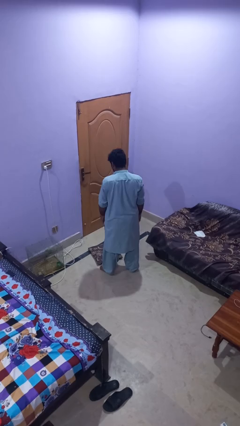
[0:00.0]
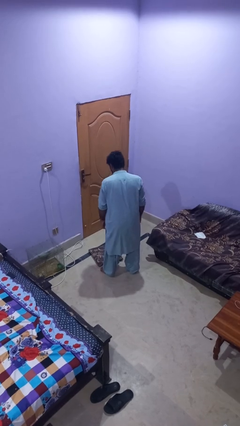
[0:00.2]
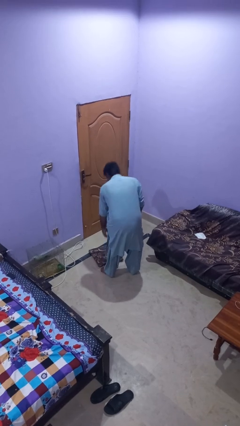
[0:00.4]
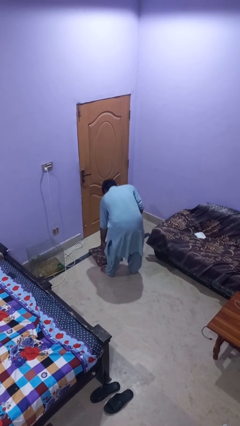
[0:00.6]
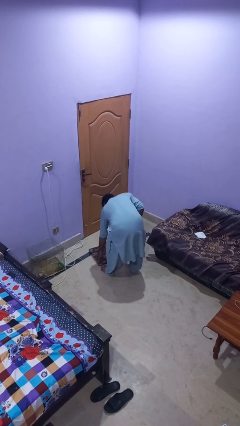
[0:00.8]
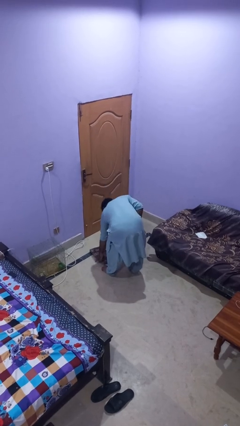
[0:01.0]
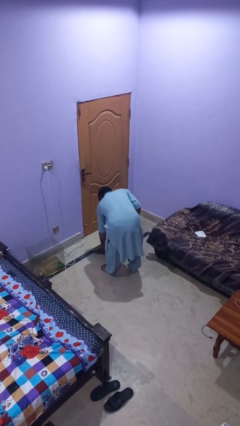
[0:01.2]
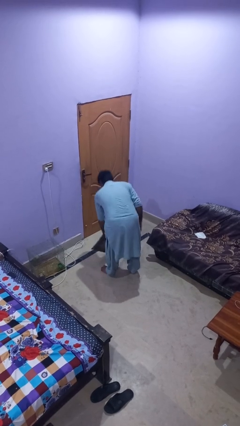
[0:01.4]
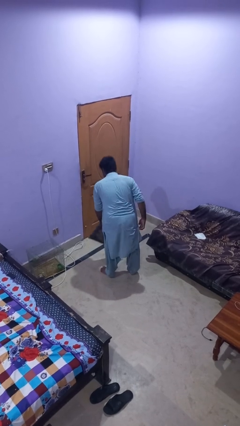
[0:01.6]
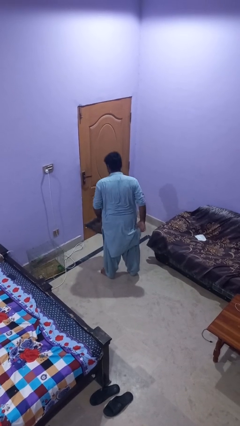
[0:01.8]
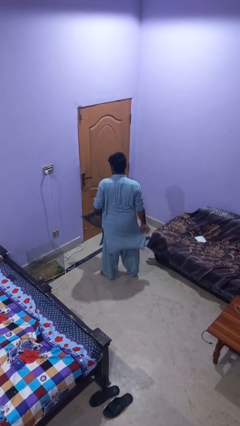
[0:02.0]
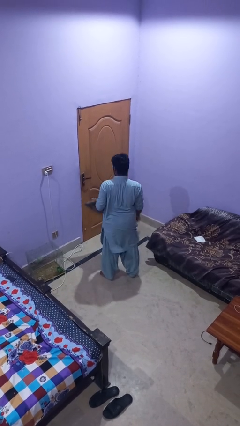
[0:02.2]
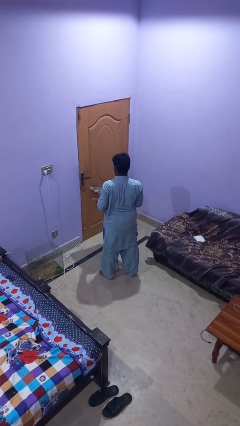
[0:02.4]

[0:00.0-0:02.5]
person picks up object from floor

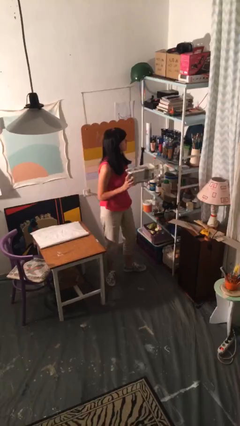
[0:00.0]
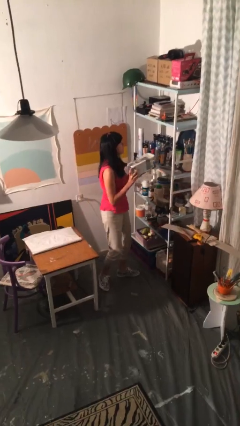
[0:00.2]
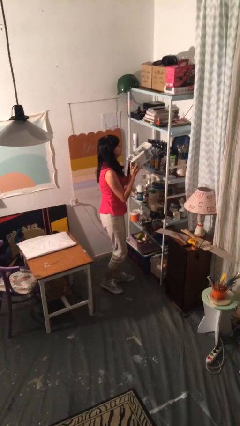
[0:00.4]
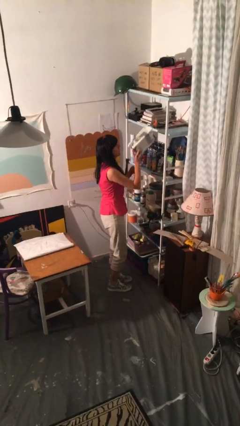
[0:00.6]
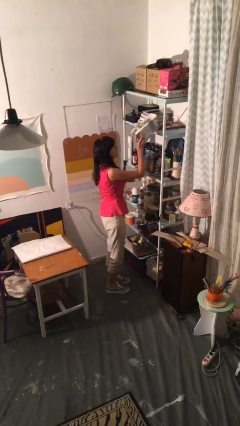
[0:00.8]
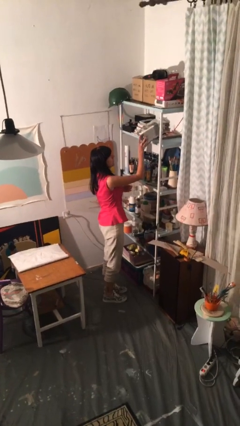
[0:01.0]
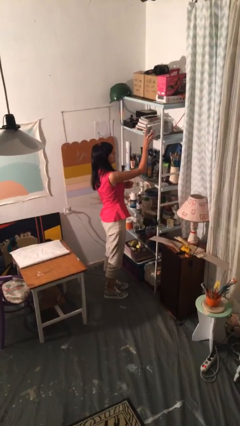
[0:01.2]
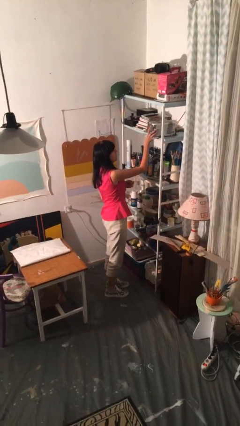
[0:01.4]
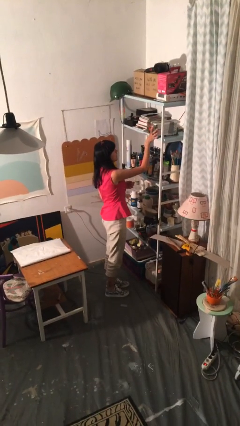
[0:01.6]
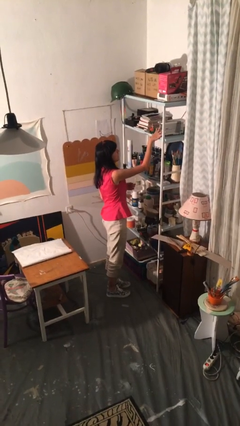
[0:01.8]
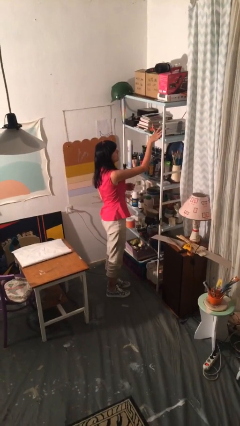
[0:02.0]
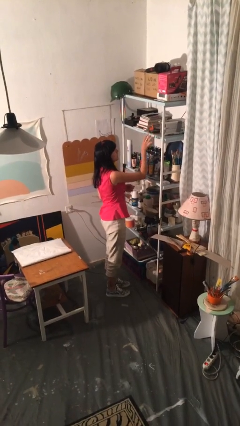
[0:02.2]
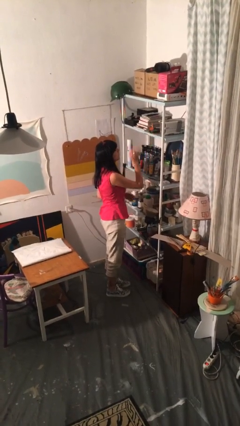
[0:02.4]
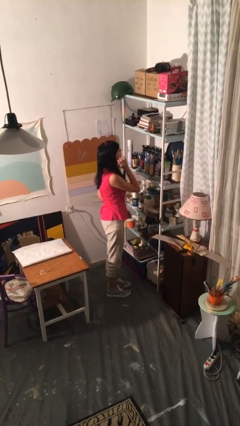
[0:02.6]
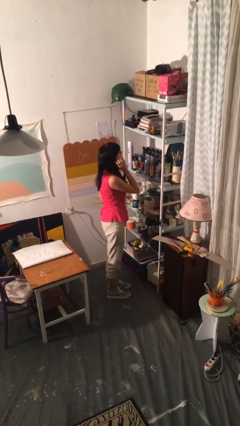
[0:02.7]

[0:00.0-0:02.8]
person puts down object on shelf

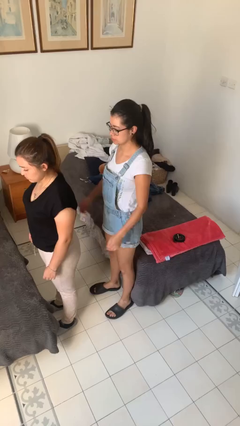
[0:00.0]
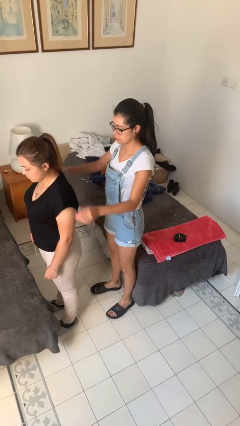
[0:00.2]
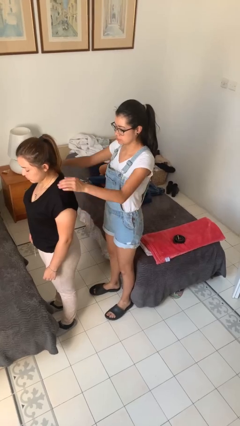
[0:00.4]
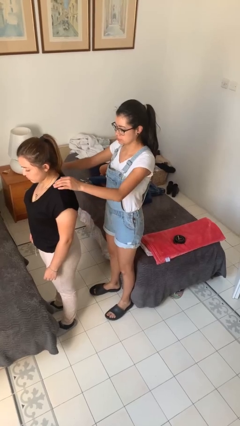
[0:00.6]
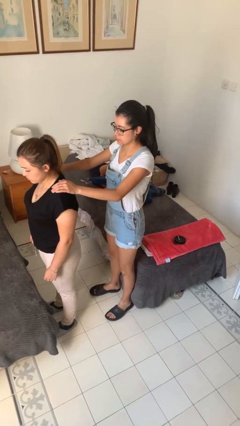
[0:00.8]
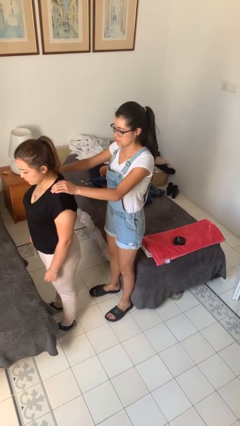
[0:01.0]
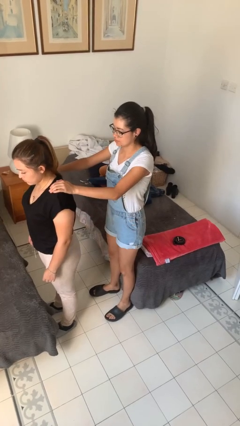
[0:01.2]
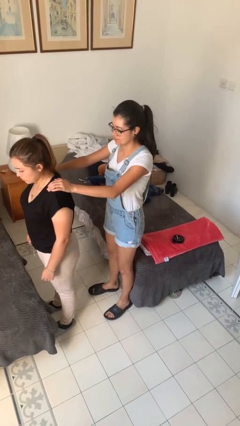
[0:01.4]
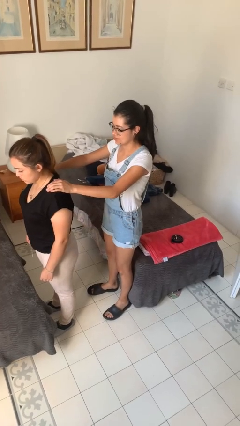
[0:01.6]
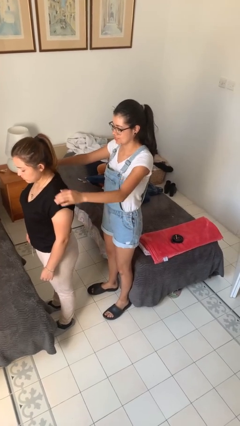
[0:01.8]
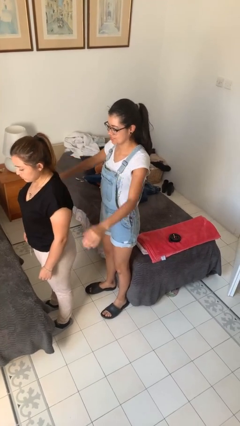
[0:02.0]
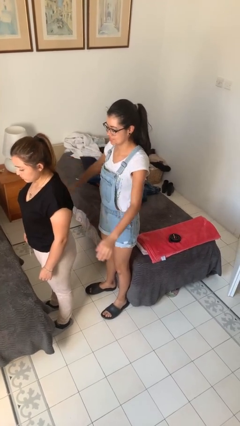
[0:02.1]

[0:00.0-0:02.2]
person pounds shoulders of person

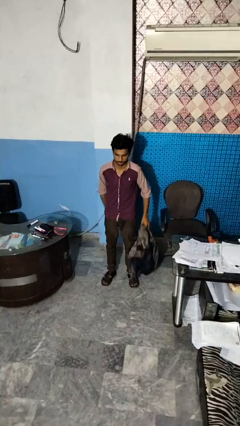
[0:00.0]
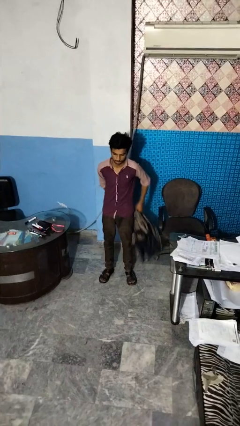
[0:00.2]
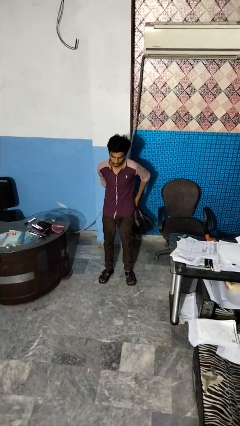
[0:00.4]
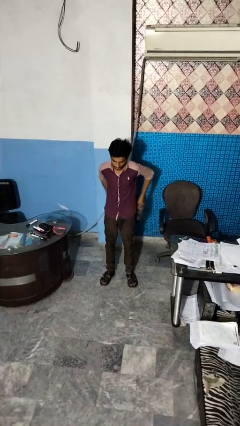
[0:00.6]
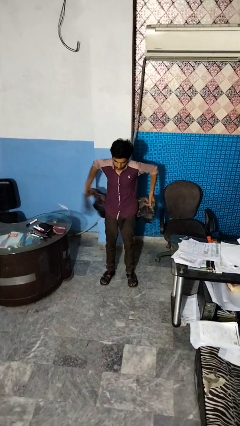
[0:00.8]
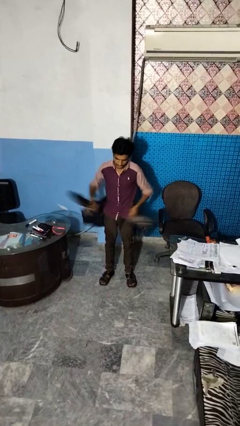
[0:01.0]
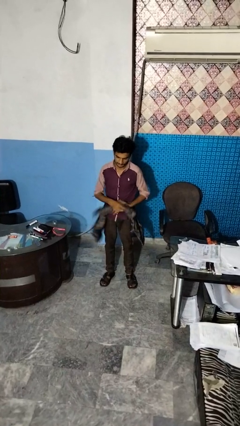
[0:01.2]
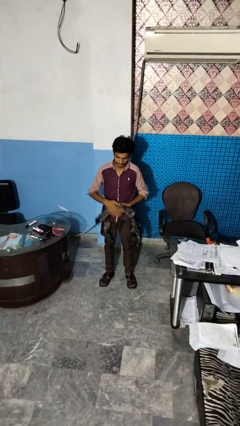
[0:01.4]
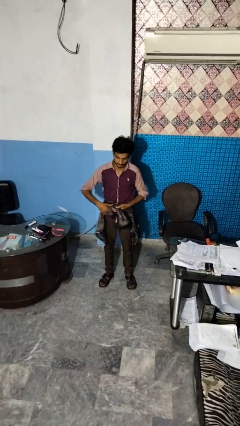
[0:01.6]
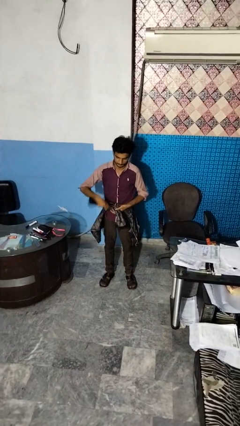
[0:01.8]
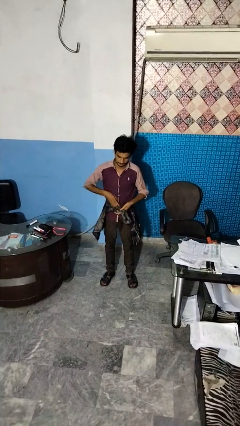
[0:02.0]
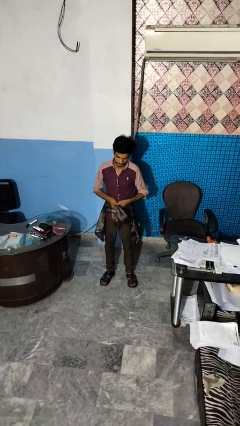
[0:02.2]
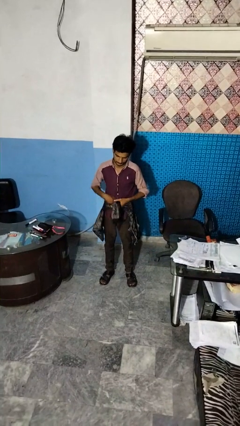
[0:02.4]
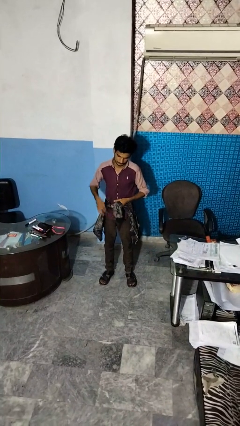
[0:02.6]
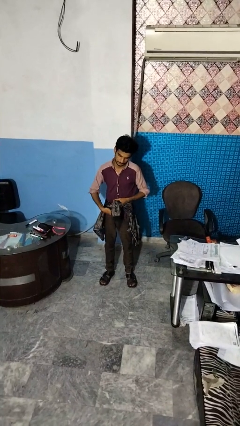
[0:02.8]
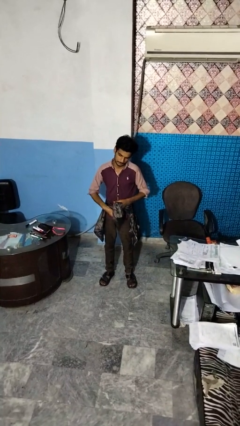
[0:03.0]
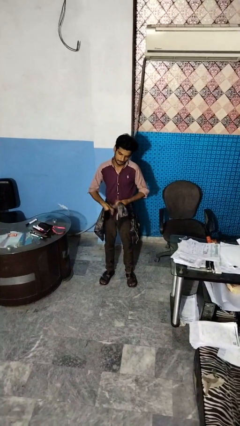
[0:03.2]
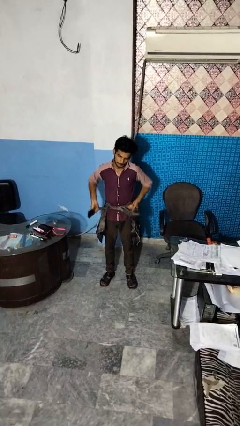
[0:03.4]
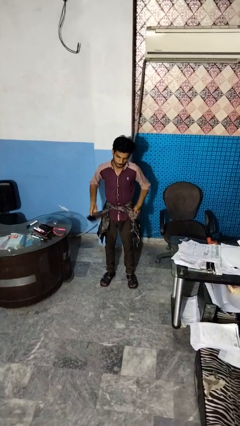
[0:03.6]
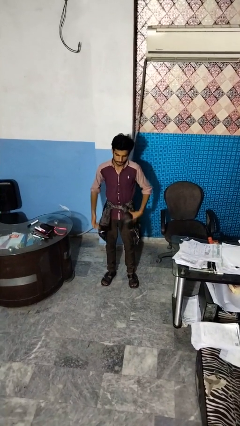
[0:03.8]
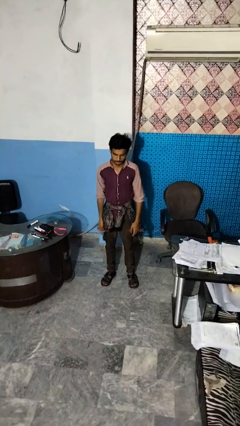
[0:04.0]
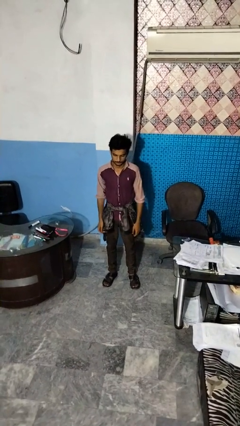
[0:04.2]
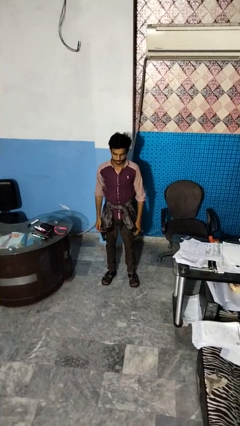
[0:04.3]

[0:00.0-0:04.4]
person ties jacket around waist

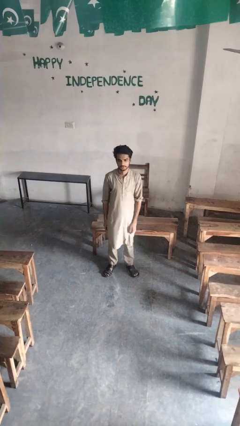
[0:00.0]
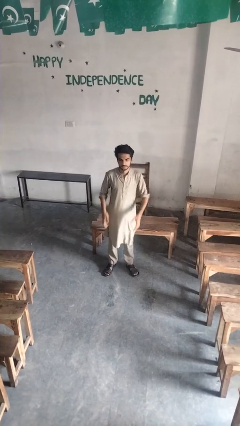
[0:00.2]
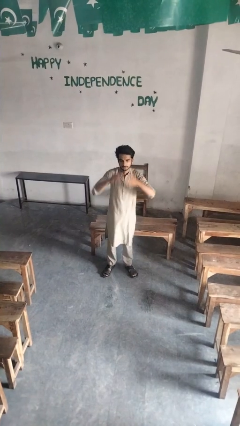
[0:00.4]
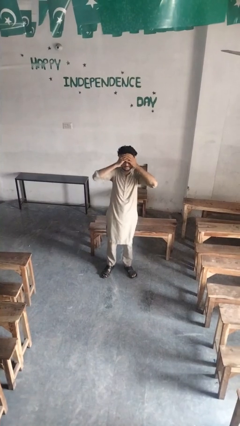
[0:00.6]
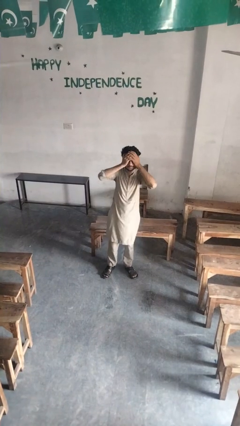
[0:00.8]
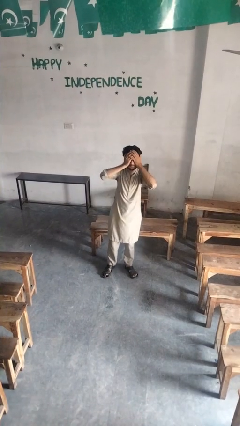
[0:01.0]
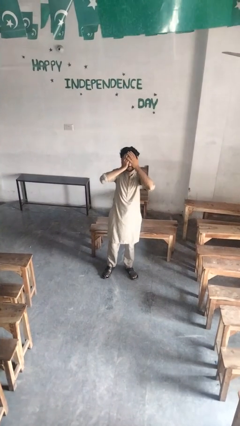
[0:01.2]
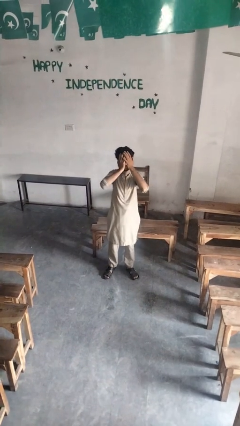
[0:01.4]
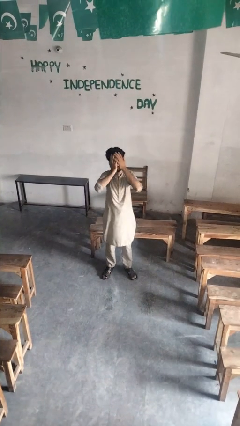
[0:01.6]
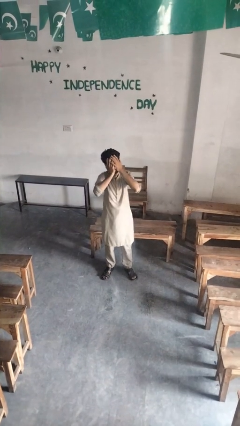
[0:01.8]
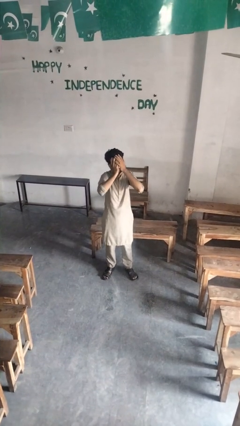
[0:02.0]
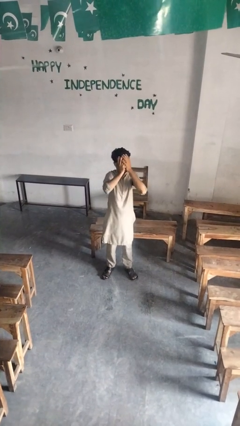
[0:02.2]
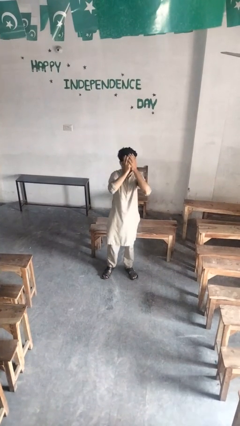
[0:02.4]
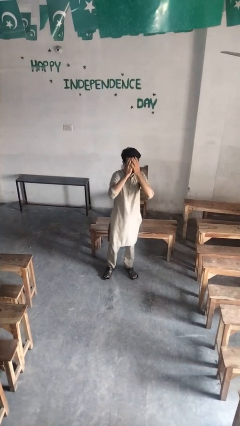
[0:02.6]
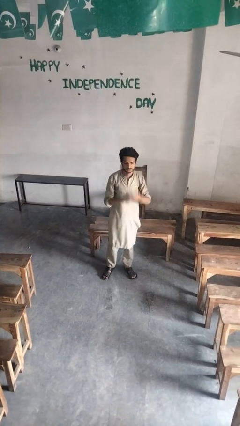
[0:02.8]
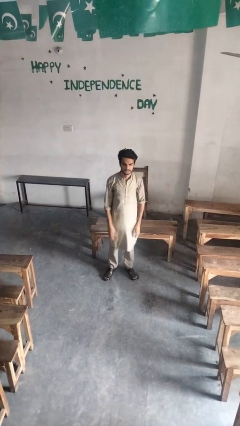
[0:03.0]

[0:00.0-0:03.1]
person covers face with hands

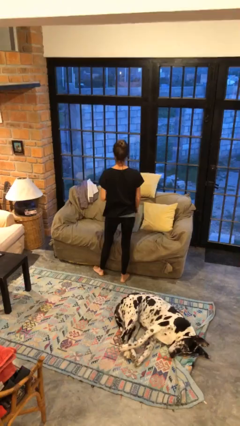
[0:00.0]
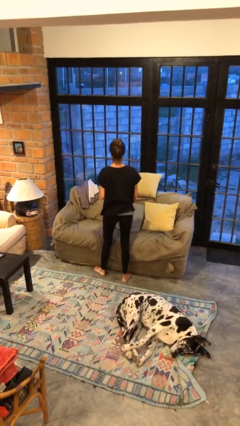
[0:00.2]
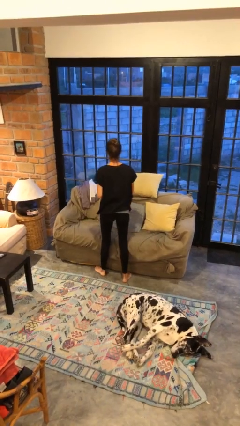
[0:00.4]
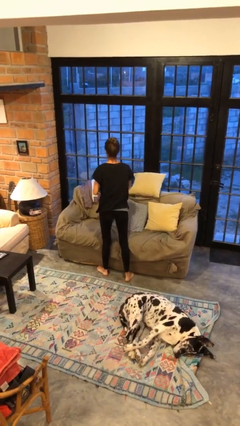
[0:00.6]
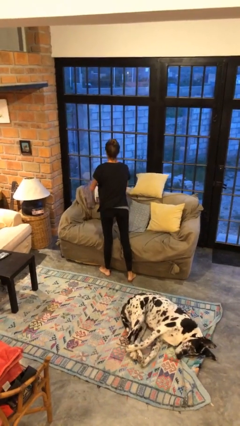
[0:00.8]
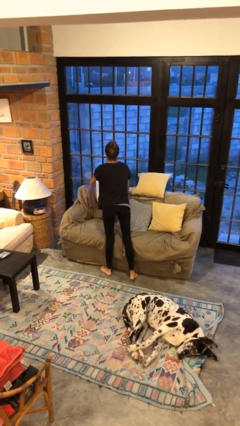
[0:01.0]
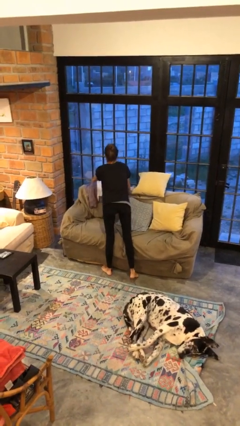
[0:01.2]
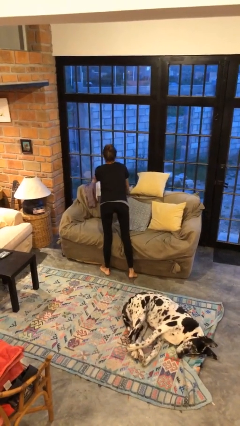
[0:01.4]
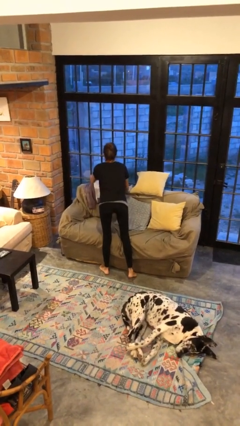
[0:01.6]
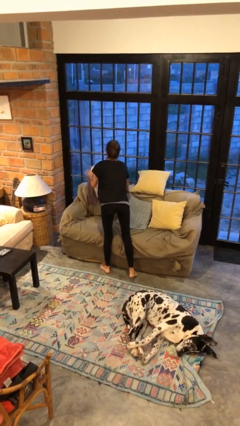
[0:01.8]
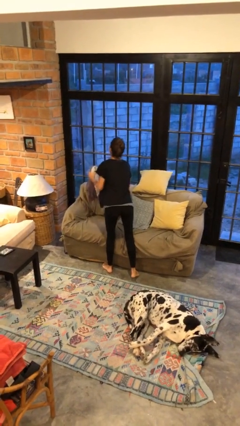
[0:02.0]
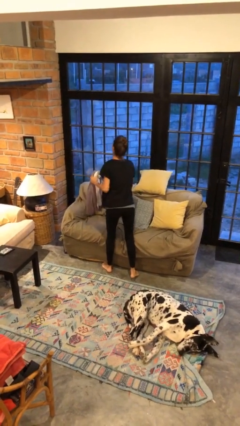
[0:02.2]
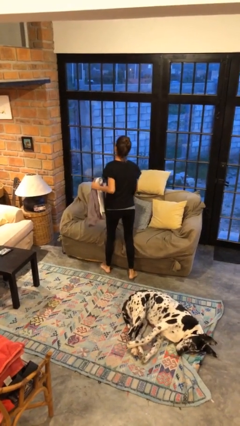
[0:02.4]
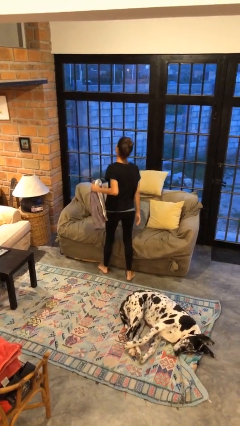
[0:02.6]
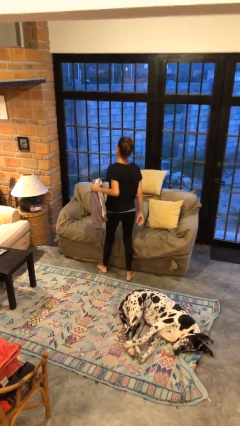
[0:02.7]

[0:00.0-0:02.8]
person picks up object from couch
